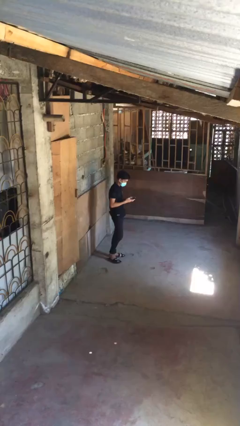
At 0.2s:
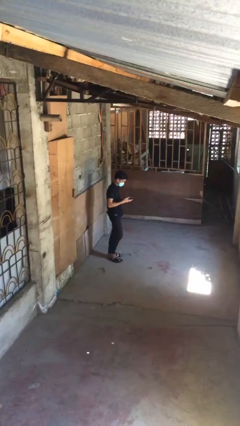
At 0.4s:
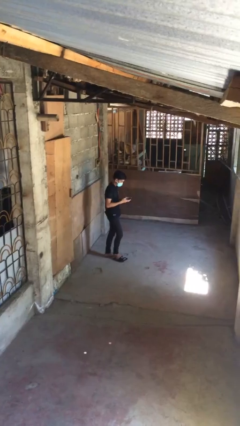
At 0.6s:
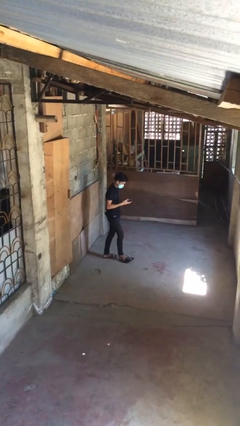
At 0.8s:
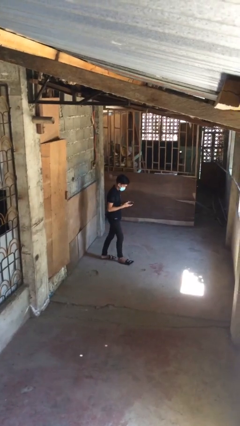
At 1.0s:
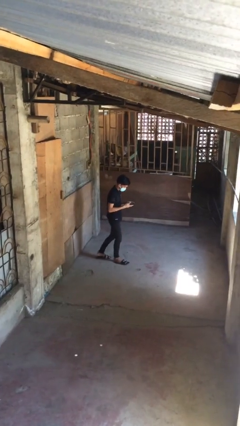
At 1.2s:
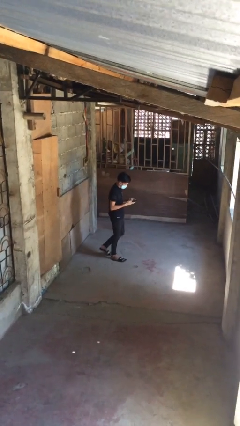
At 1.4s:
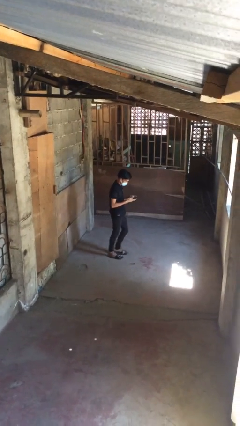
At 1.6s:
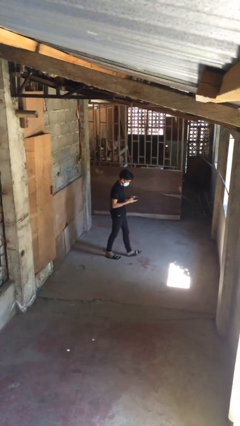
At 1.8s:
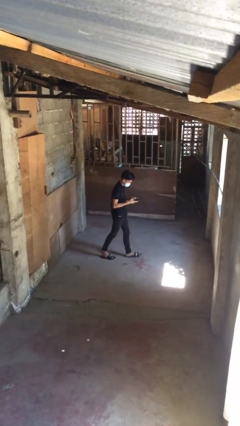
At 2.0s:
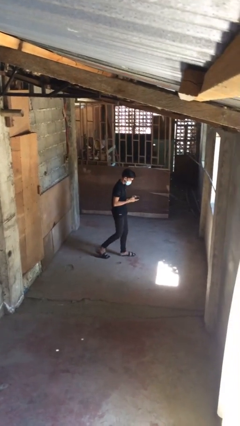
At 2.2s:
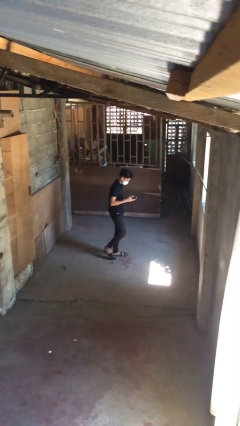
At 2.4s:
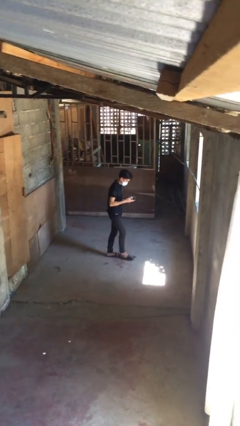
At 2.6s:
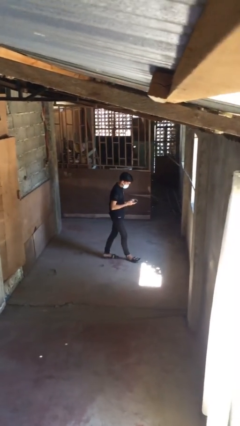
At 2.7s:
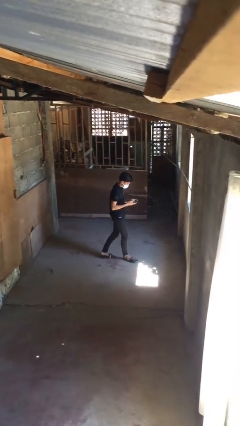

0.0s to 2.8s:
person texts on phone

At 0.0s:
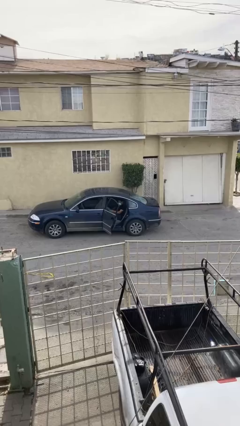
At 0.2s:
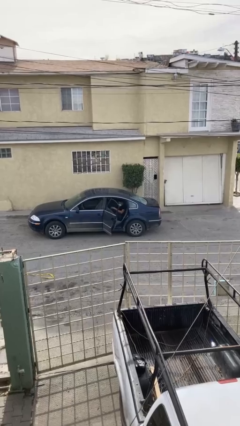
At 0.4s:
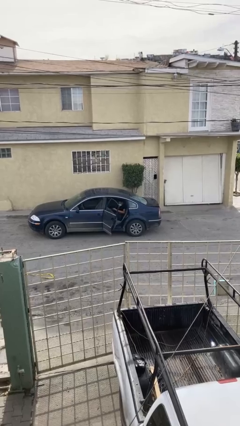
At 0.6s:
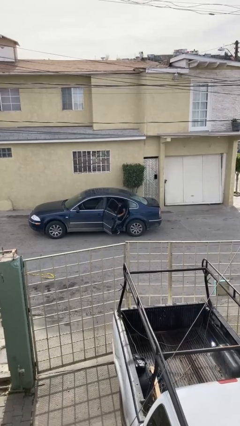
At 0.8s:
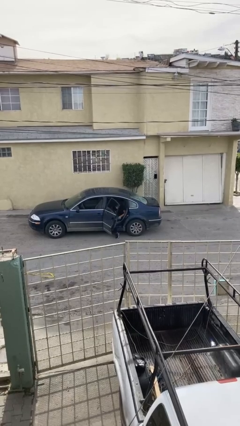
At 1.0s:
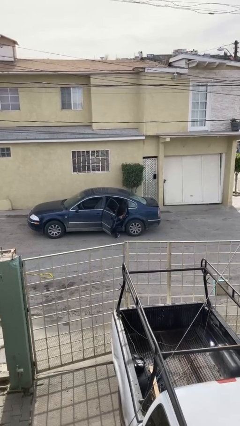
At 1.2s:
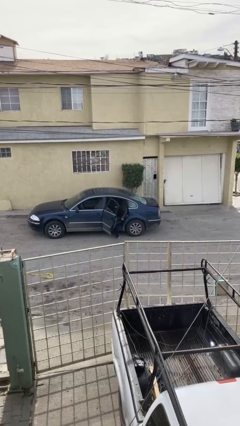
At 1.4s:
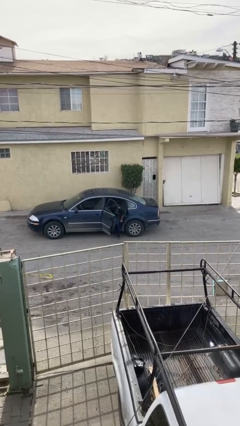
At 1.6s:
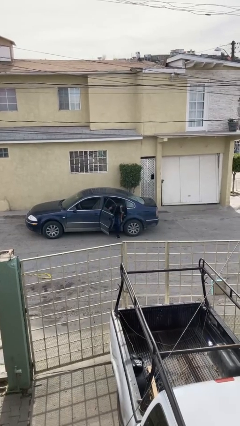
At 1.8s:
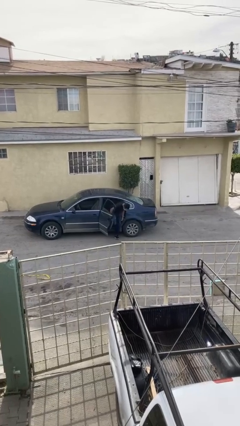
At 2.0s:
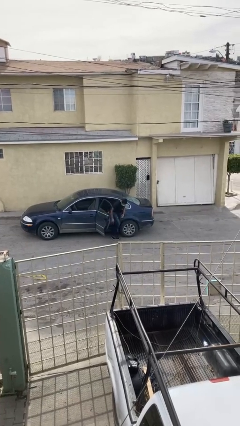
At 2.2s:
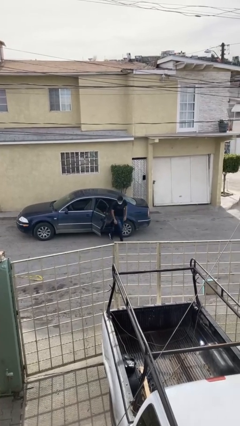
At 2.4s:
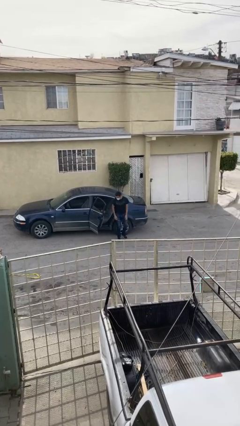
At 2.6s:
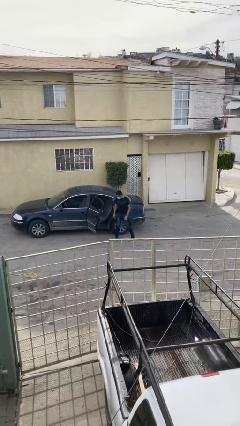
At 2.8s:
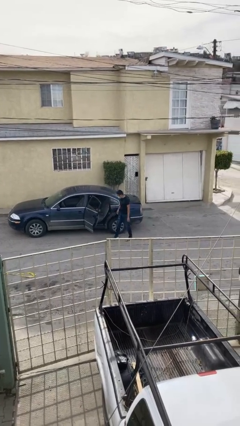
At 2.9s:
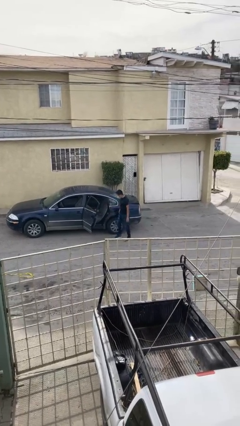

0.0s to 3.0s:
person exits car

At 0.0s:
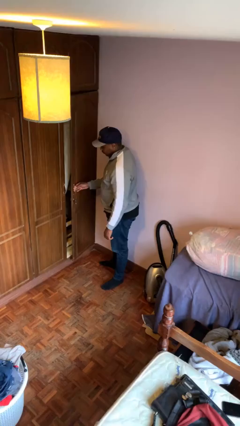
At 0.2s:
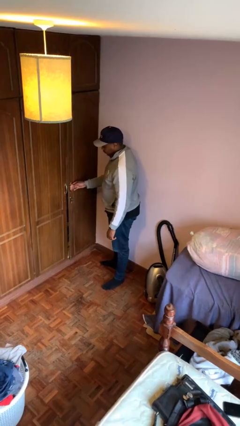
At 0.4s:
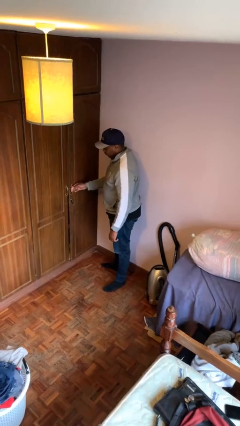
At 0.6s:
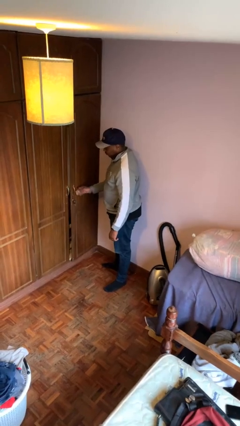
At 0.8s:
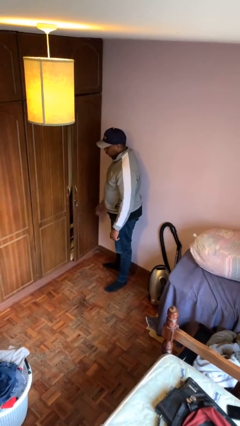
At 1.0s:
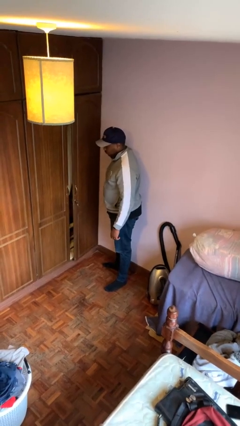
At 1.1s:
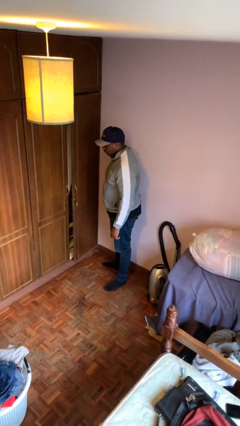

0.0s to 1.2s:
person closes closet door

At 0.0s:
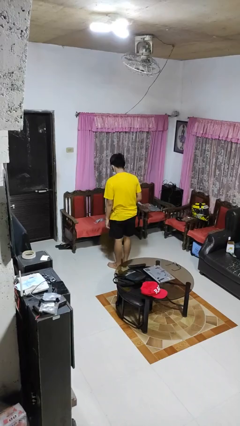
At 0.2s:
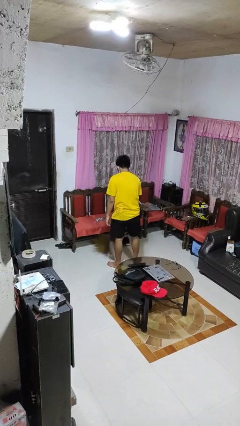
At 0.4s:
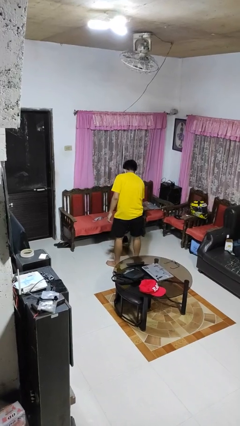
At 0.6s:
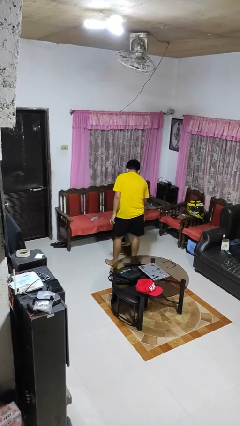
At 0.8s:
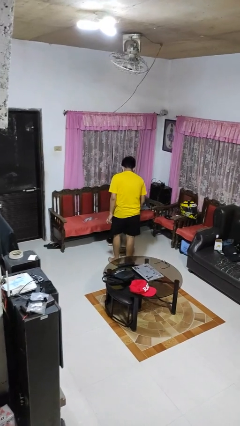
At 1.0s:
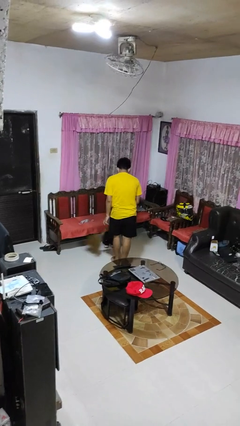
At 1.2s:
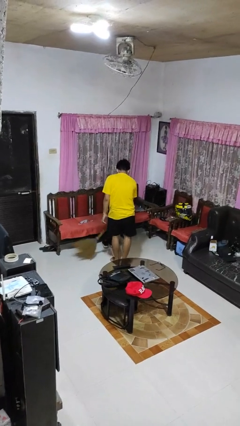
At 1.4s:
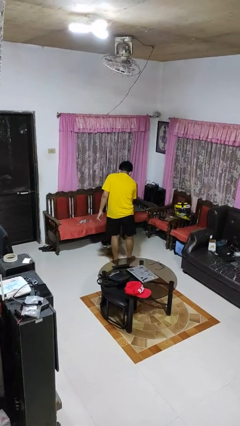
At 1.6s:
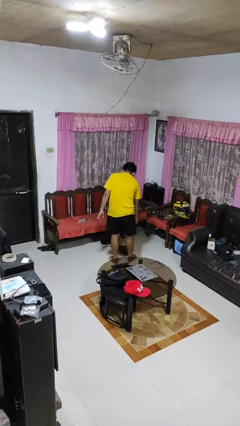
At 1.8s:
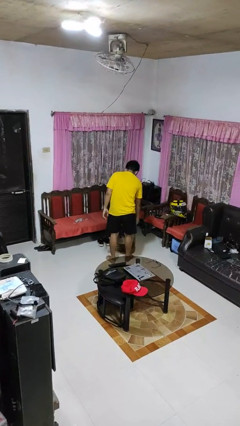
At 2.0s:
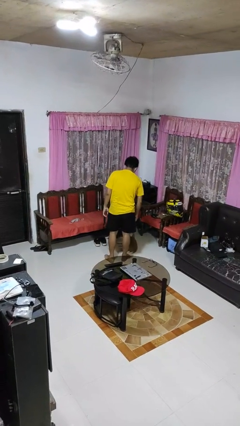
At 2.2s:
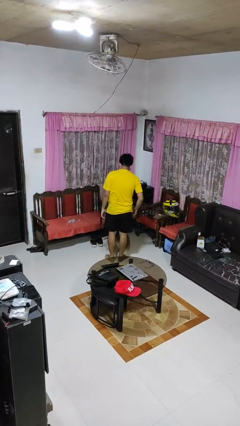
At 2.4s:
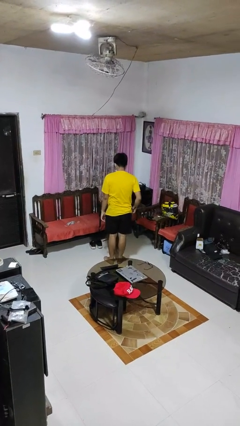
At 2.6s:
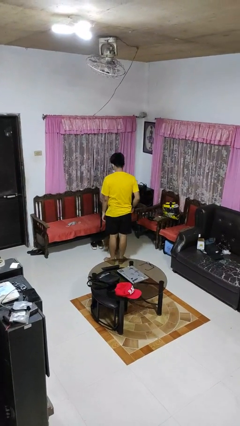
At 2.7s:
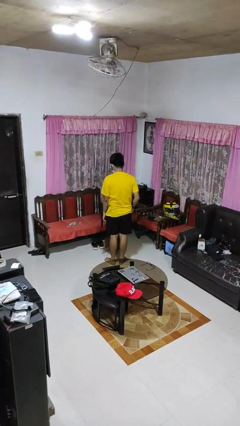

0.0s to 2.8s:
person sweeps floor

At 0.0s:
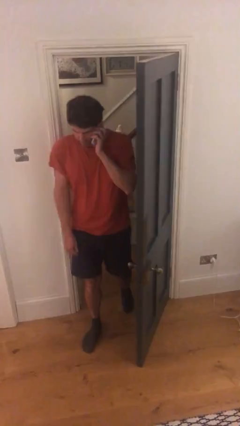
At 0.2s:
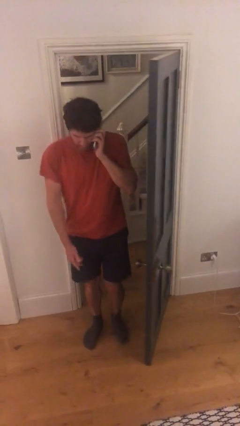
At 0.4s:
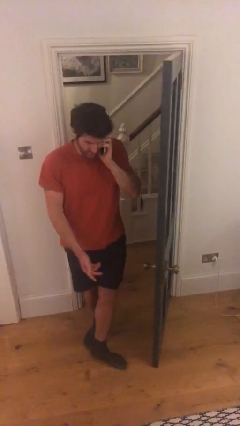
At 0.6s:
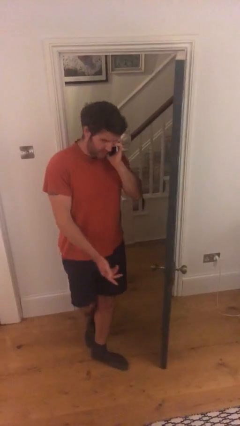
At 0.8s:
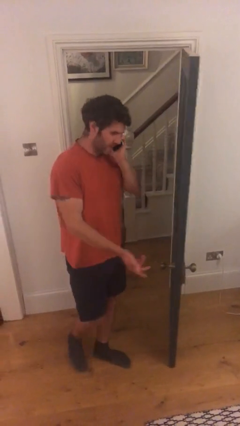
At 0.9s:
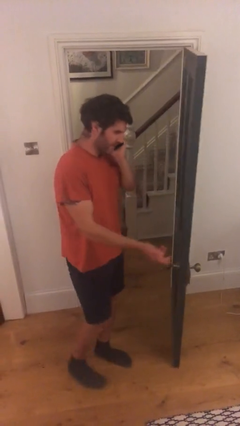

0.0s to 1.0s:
person enters scene through structure

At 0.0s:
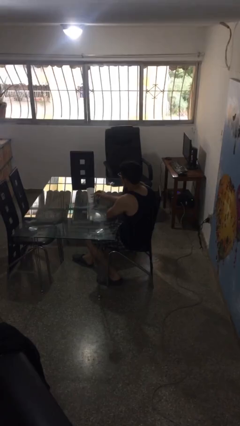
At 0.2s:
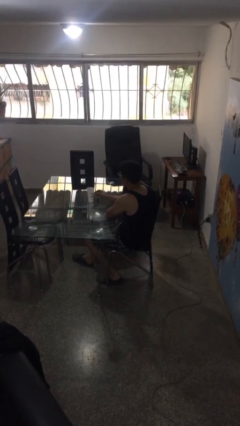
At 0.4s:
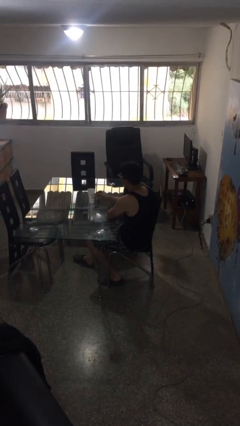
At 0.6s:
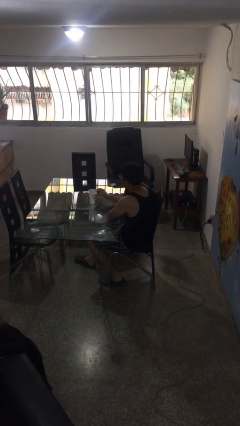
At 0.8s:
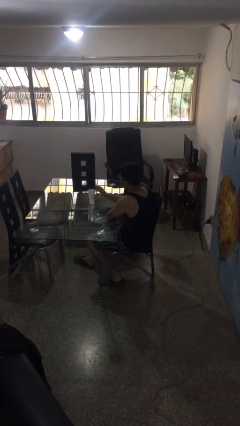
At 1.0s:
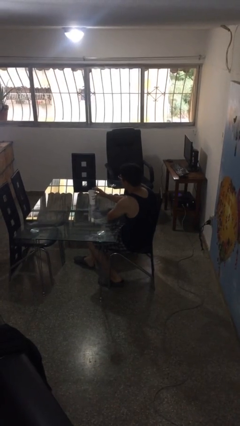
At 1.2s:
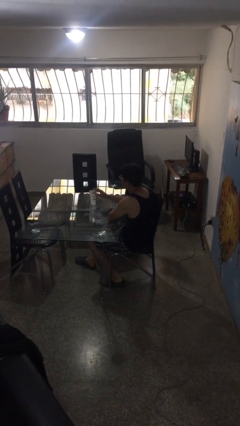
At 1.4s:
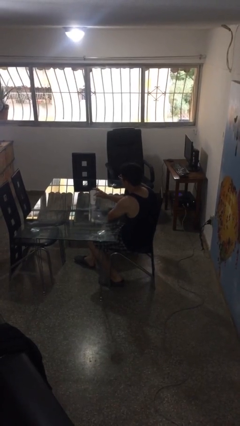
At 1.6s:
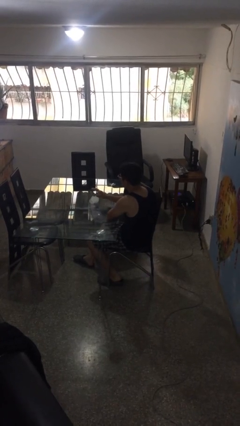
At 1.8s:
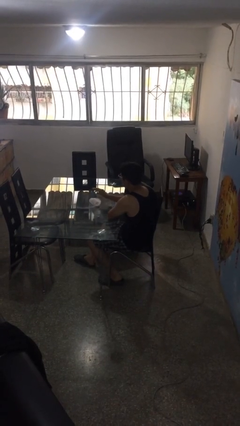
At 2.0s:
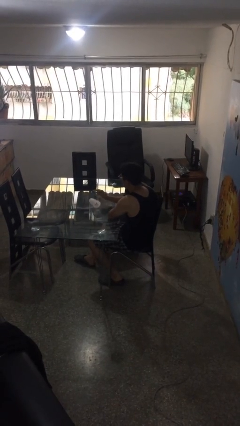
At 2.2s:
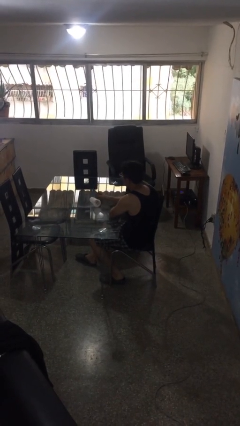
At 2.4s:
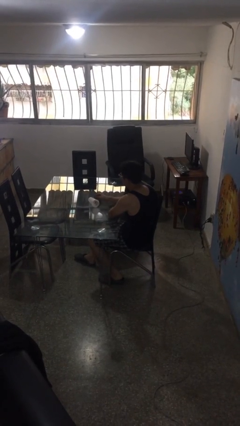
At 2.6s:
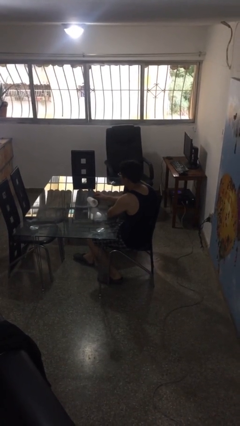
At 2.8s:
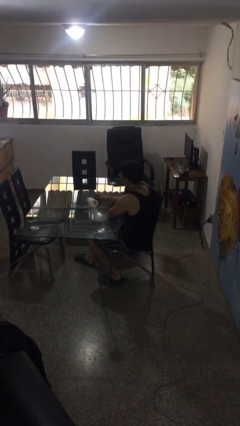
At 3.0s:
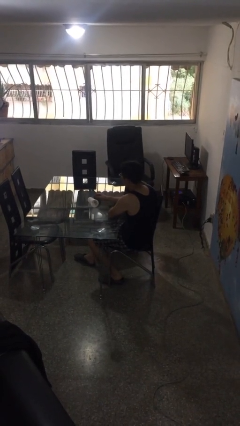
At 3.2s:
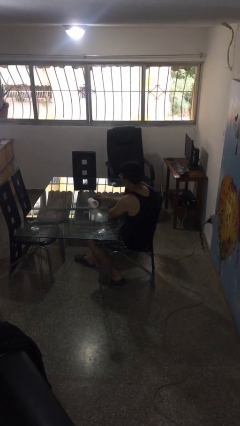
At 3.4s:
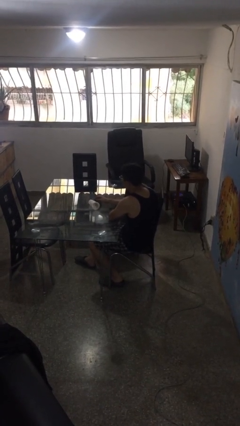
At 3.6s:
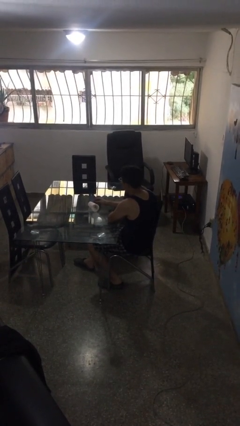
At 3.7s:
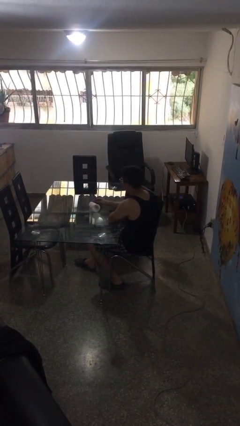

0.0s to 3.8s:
person knocks over glass

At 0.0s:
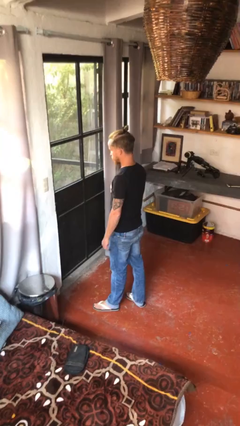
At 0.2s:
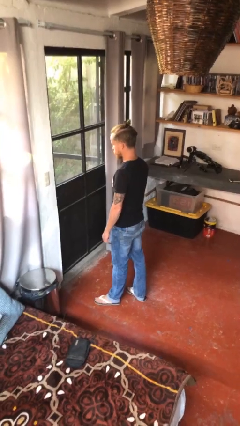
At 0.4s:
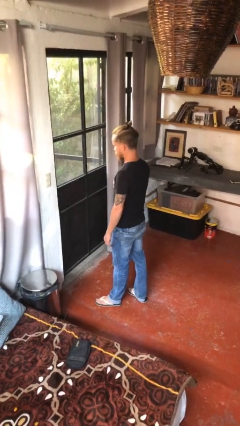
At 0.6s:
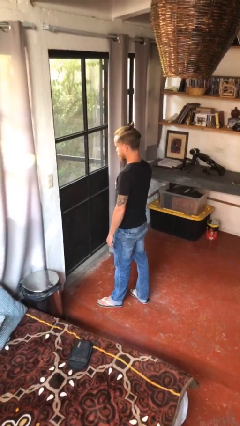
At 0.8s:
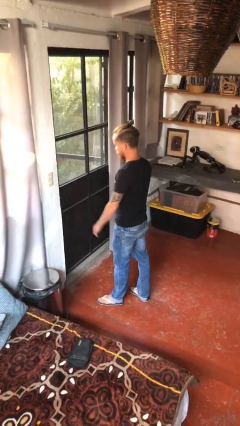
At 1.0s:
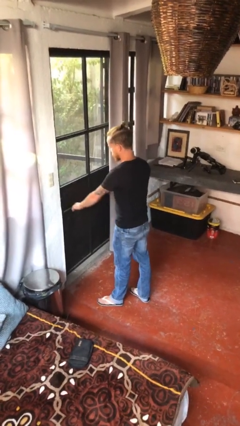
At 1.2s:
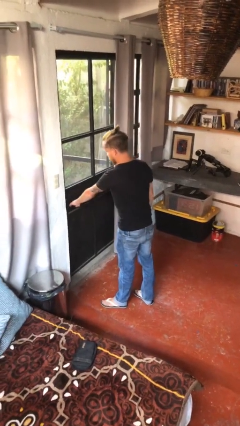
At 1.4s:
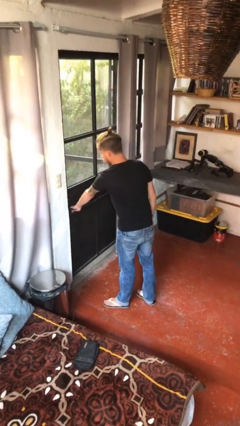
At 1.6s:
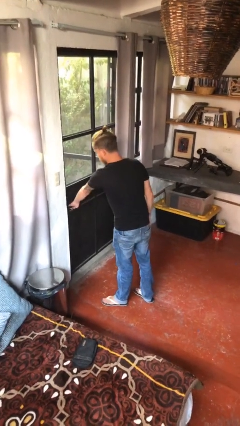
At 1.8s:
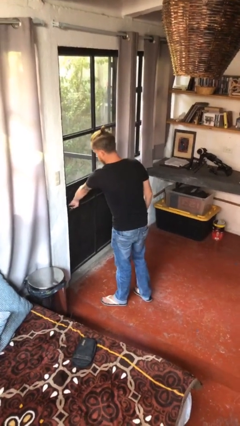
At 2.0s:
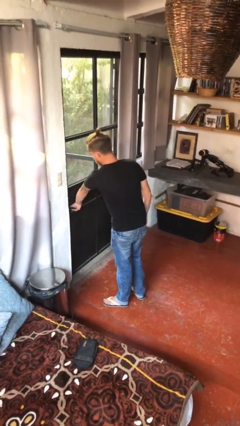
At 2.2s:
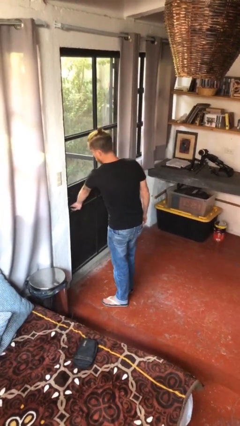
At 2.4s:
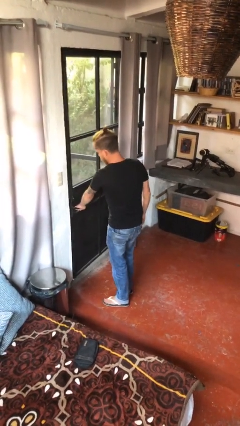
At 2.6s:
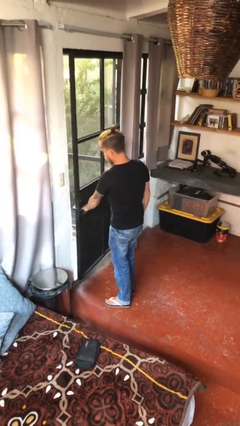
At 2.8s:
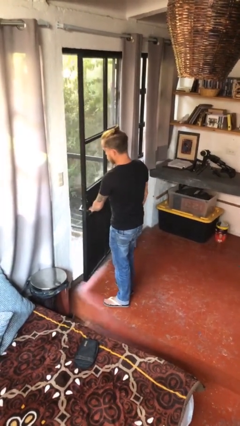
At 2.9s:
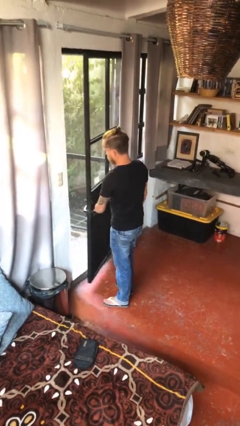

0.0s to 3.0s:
person opens facility door
